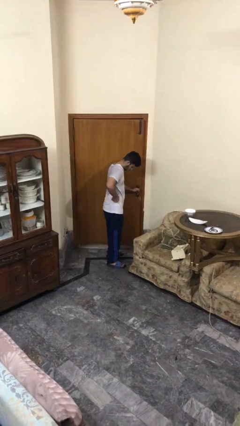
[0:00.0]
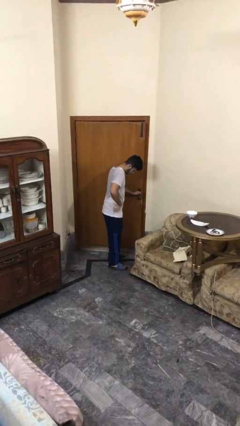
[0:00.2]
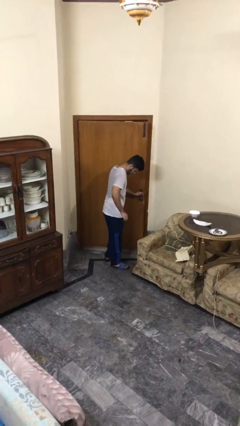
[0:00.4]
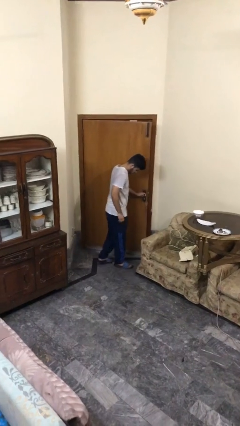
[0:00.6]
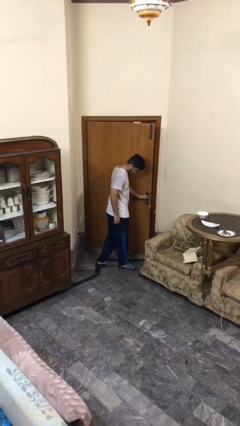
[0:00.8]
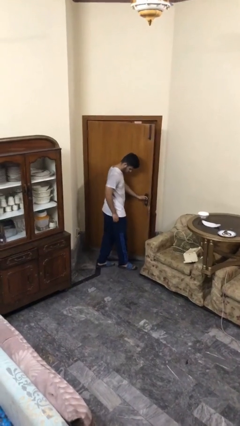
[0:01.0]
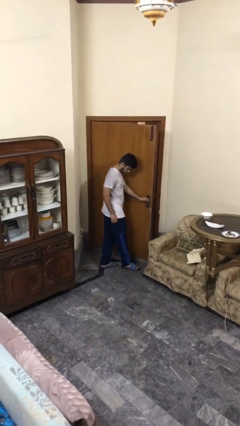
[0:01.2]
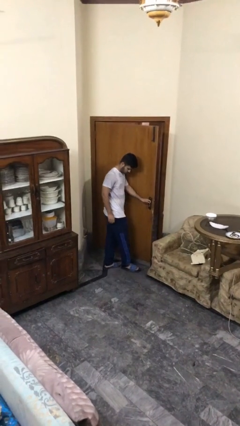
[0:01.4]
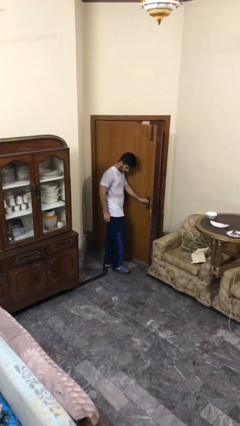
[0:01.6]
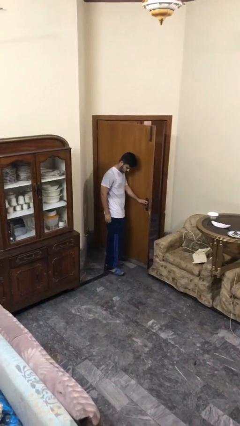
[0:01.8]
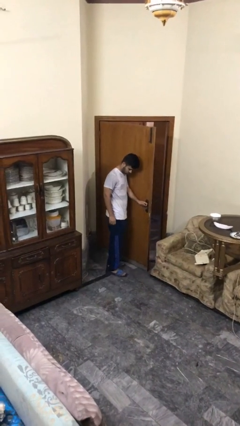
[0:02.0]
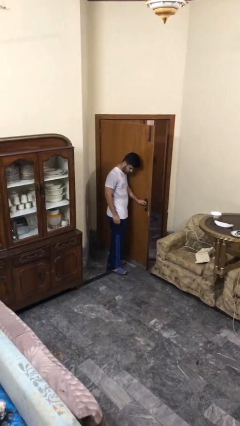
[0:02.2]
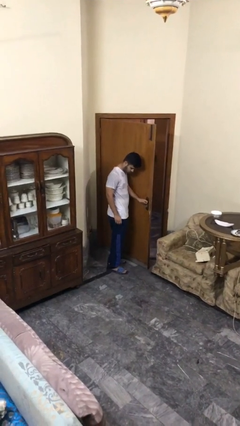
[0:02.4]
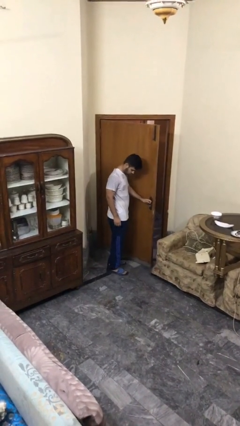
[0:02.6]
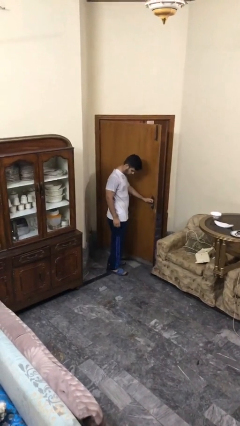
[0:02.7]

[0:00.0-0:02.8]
person opens facility door

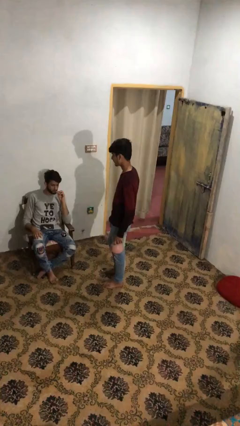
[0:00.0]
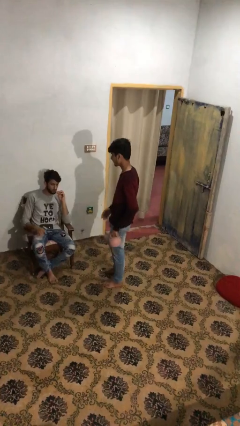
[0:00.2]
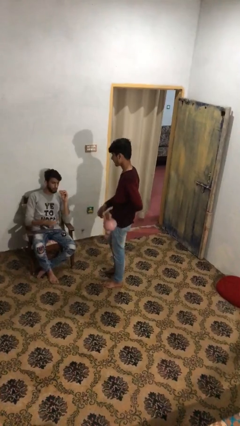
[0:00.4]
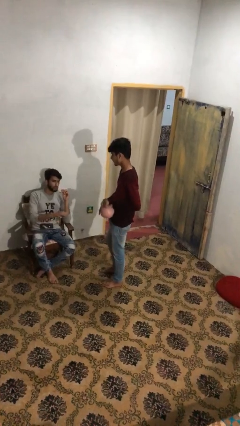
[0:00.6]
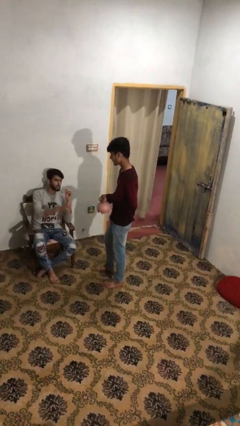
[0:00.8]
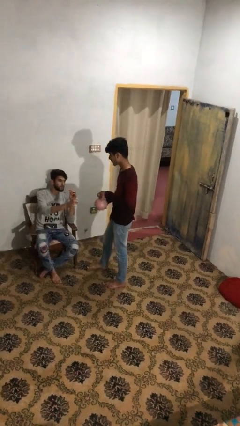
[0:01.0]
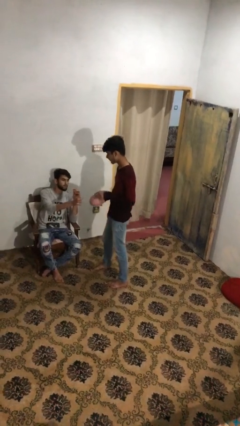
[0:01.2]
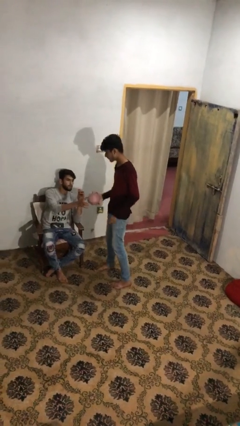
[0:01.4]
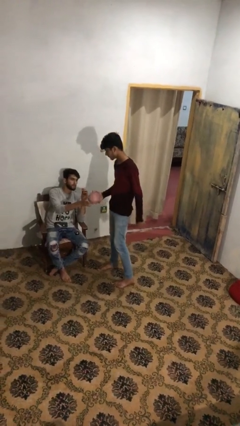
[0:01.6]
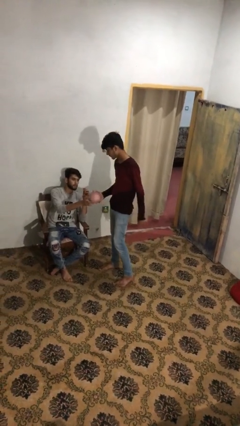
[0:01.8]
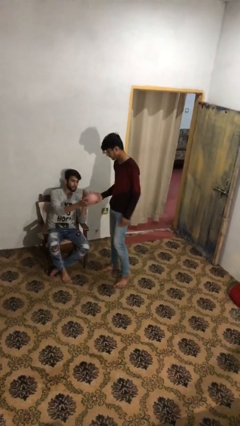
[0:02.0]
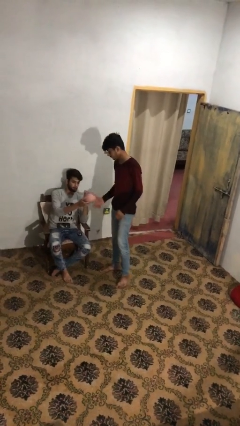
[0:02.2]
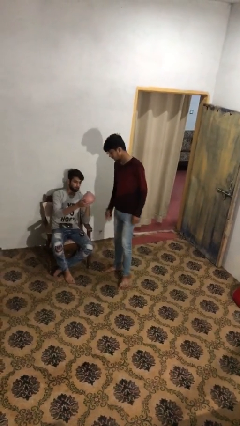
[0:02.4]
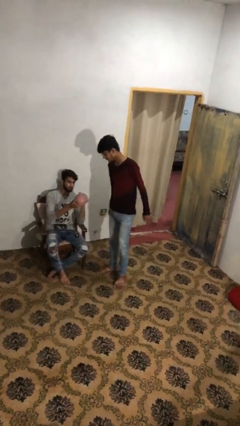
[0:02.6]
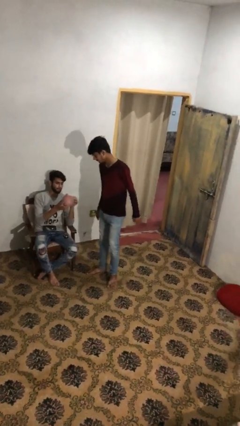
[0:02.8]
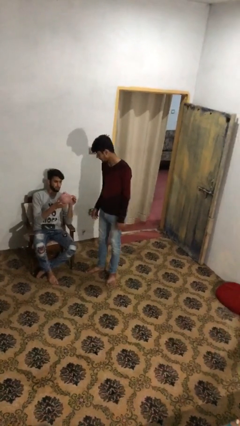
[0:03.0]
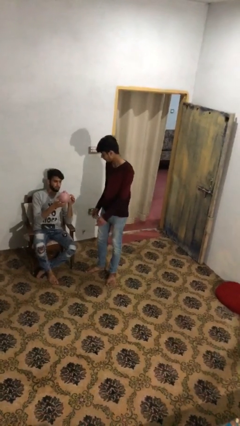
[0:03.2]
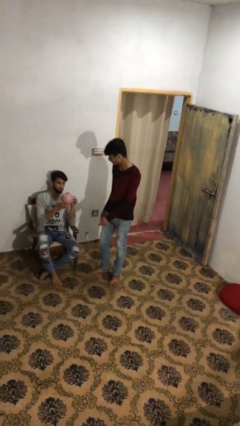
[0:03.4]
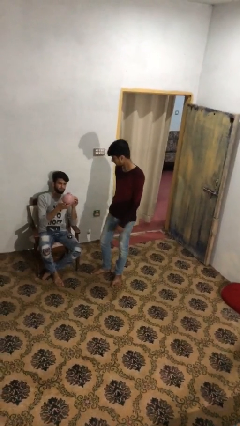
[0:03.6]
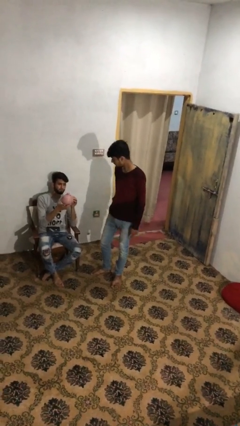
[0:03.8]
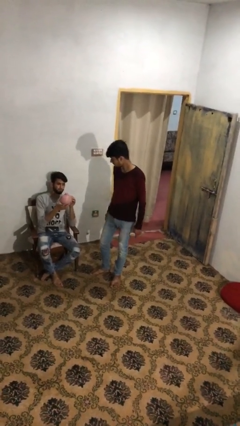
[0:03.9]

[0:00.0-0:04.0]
person transfers object to person

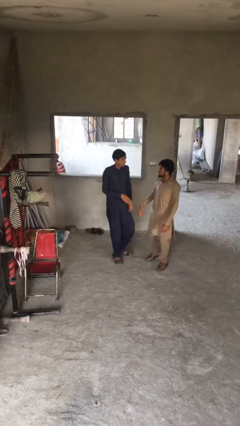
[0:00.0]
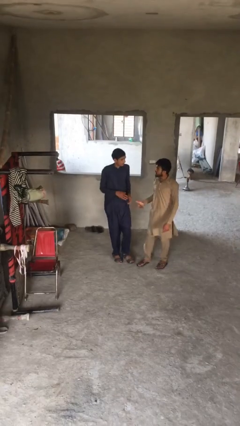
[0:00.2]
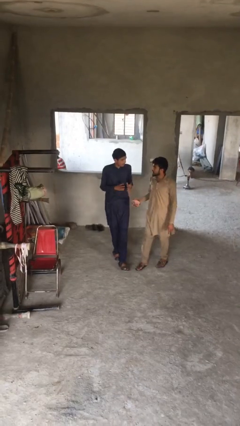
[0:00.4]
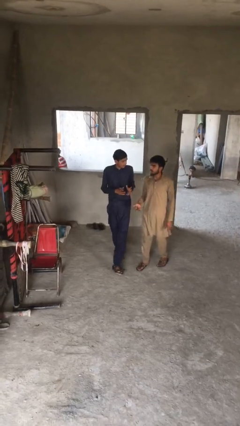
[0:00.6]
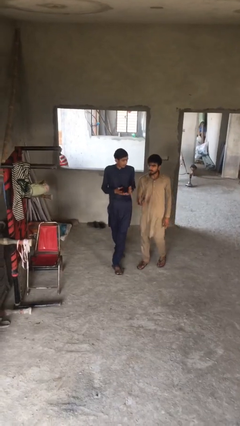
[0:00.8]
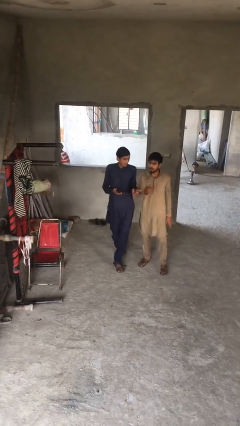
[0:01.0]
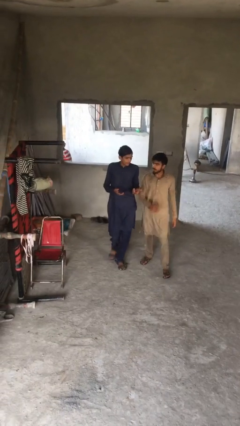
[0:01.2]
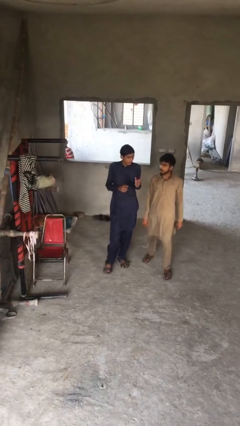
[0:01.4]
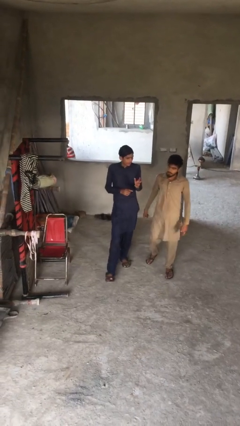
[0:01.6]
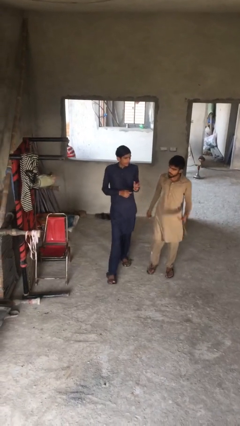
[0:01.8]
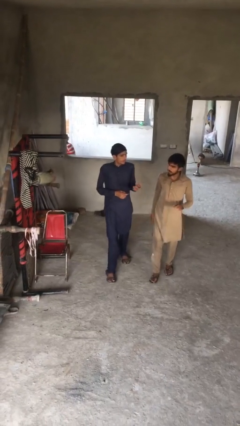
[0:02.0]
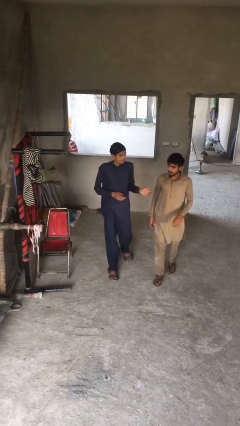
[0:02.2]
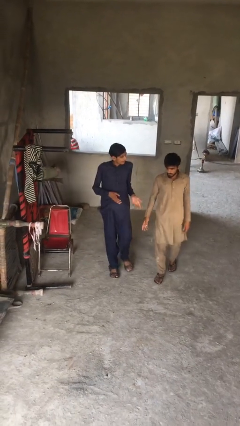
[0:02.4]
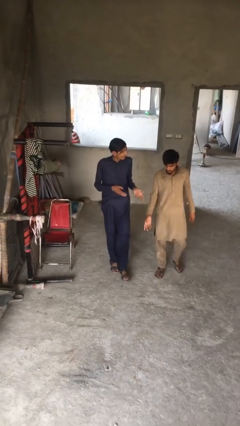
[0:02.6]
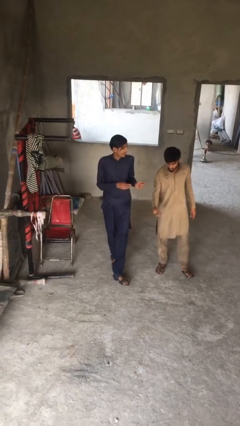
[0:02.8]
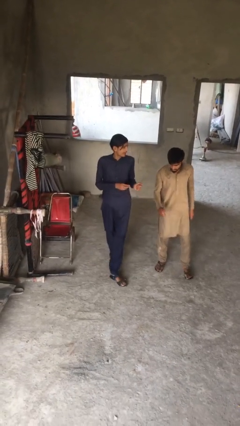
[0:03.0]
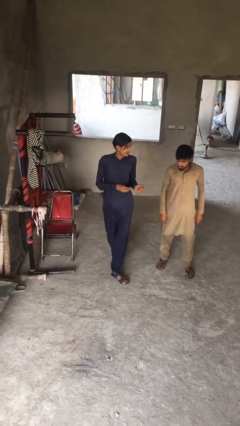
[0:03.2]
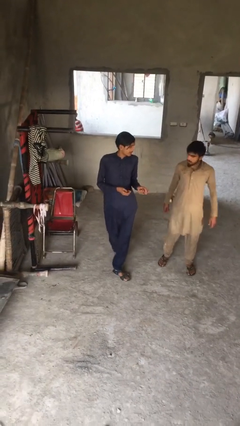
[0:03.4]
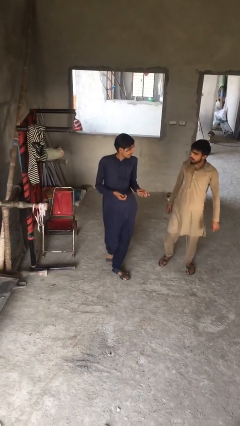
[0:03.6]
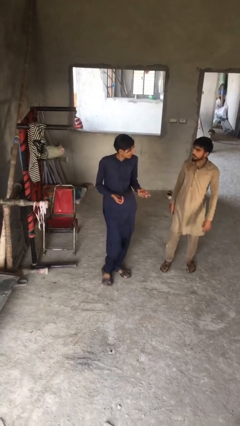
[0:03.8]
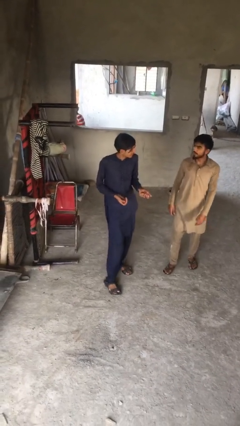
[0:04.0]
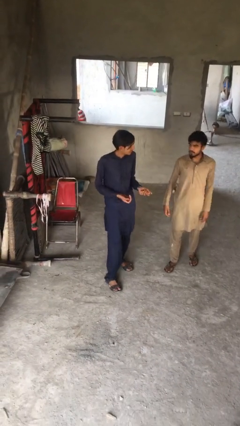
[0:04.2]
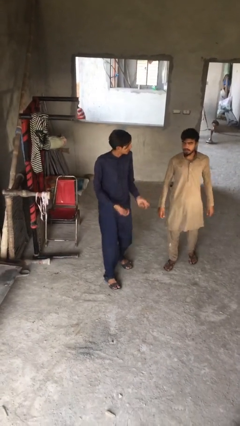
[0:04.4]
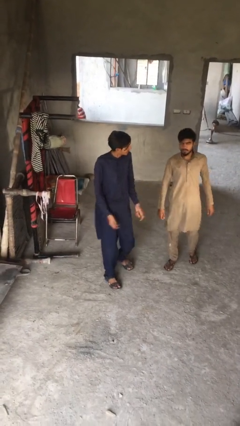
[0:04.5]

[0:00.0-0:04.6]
person talks to person

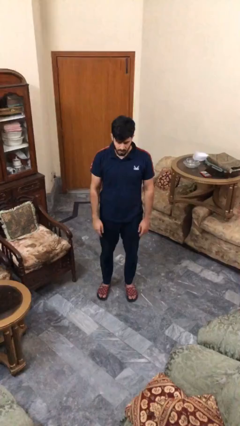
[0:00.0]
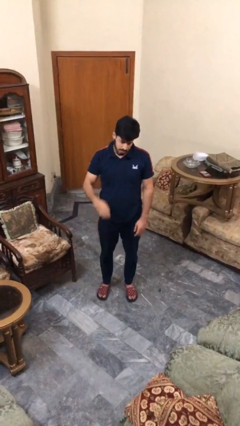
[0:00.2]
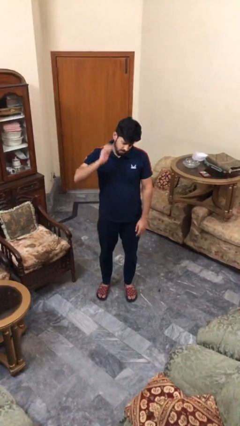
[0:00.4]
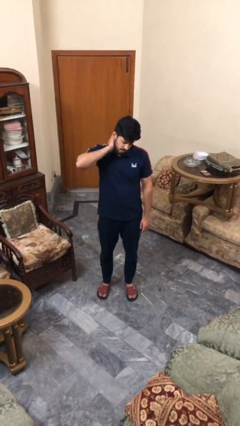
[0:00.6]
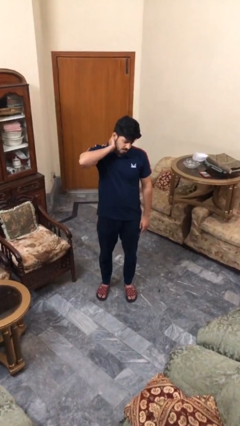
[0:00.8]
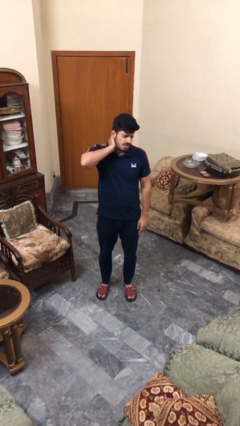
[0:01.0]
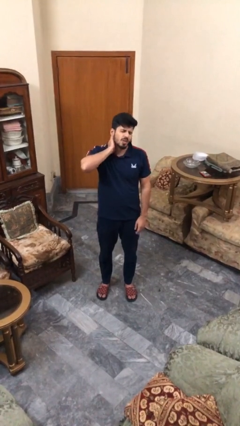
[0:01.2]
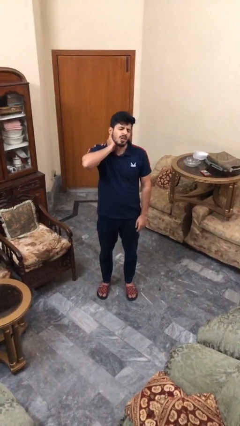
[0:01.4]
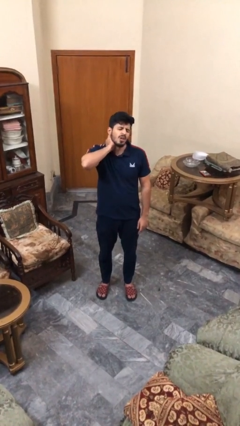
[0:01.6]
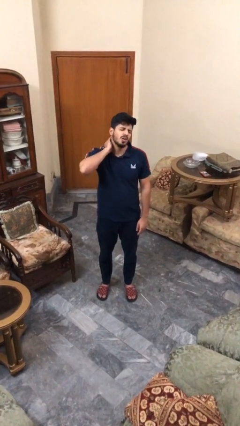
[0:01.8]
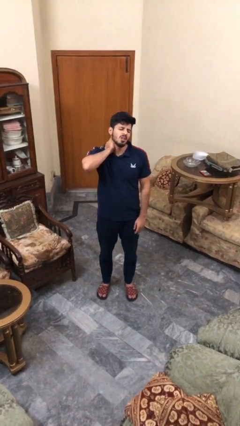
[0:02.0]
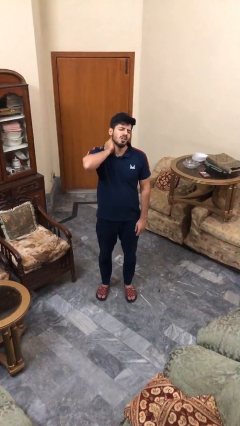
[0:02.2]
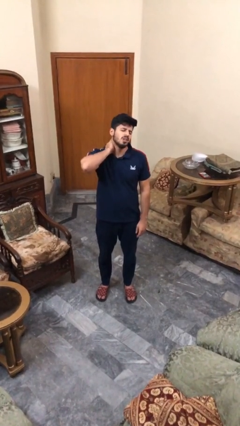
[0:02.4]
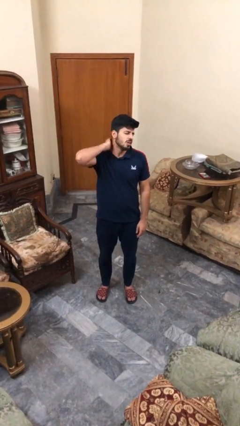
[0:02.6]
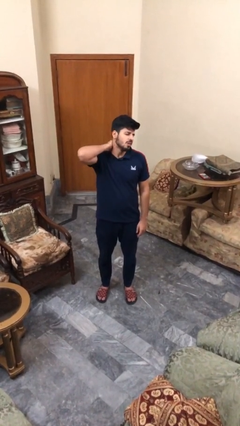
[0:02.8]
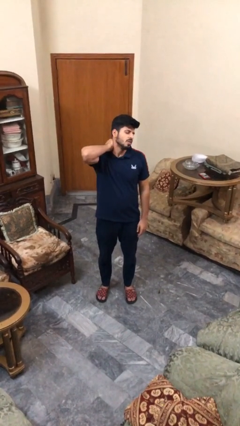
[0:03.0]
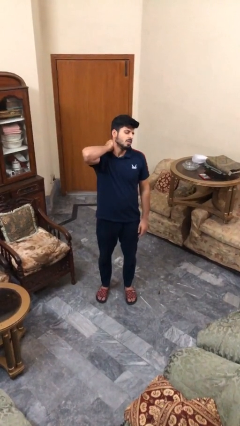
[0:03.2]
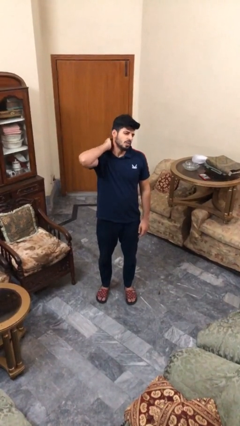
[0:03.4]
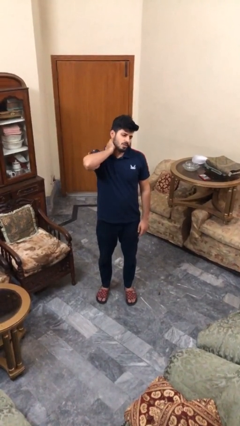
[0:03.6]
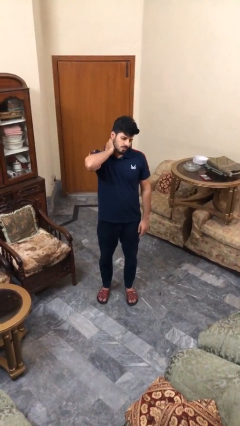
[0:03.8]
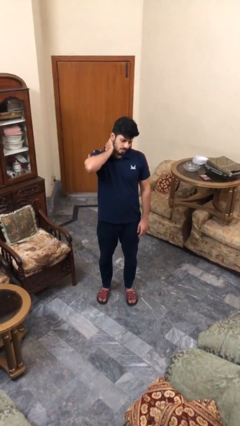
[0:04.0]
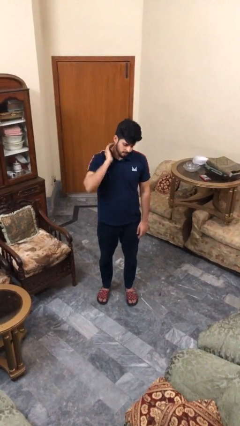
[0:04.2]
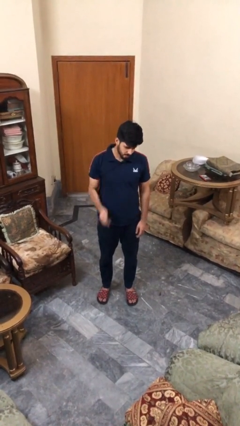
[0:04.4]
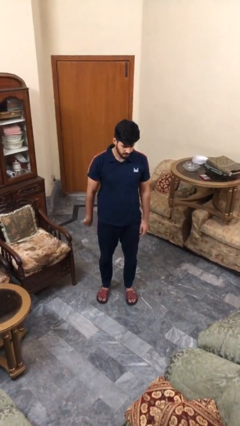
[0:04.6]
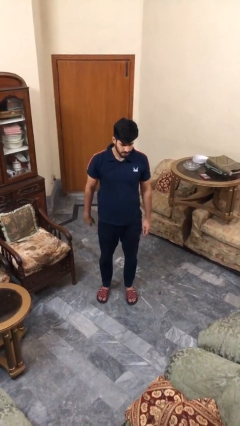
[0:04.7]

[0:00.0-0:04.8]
person rubs neck

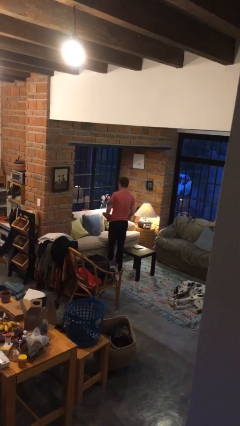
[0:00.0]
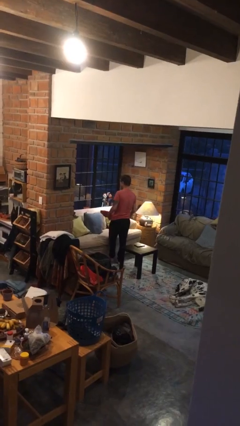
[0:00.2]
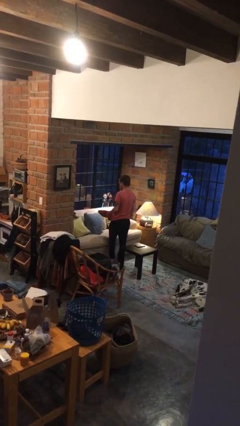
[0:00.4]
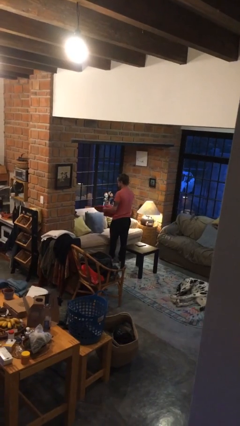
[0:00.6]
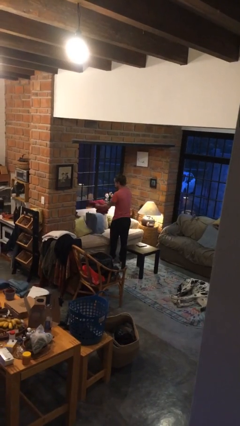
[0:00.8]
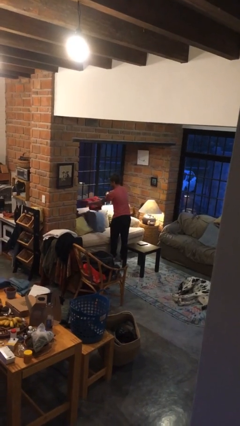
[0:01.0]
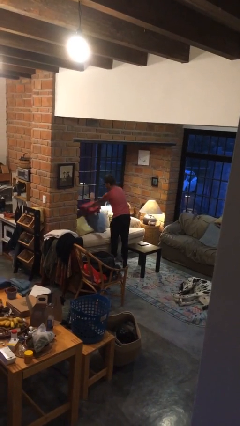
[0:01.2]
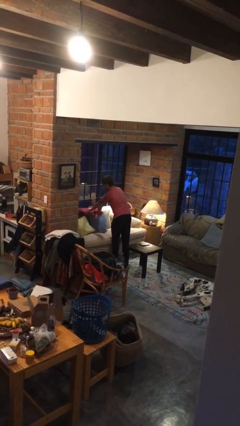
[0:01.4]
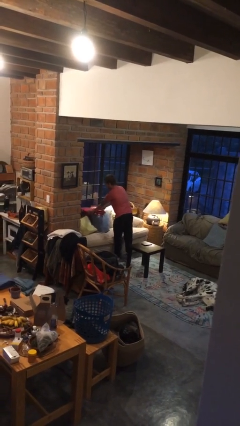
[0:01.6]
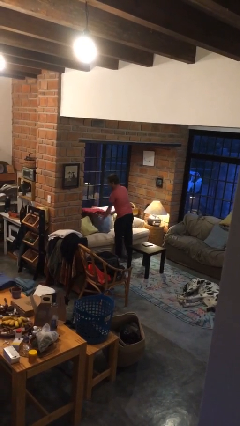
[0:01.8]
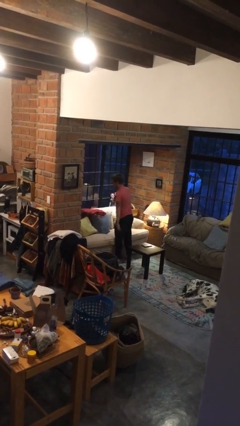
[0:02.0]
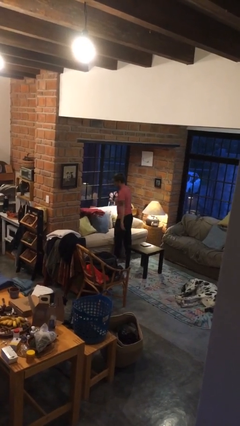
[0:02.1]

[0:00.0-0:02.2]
person puts down object on couch
